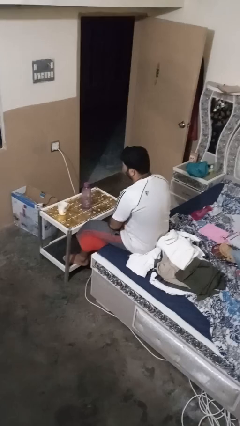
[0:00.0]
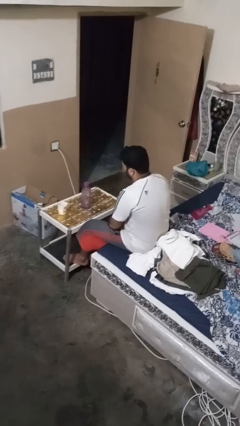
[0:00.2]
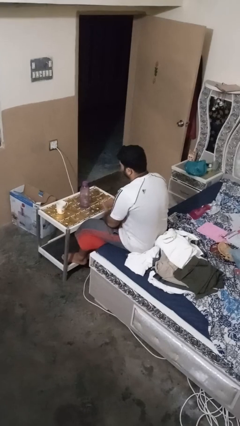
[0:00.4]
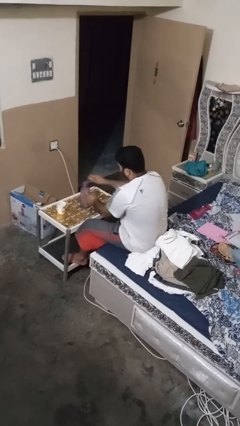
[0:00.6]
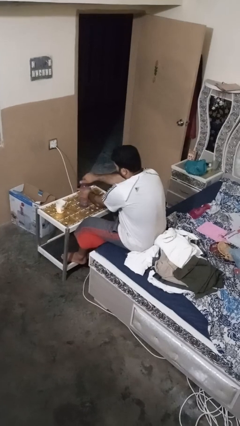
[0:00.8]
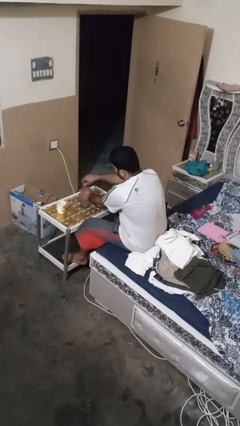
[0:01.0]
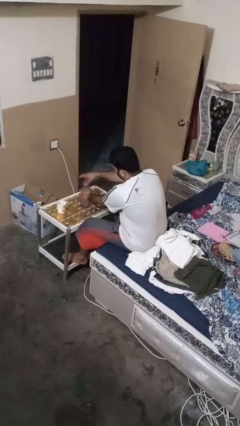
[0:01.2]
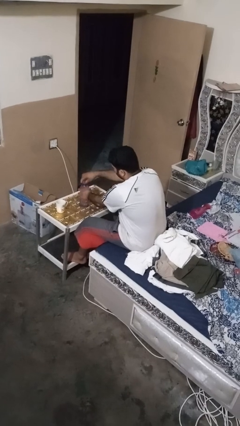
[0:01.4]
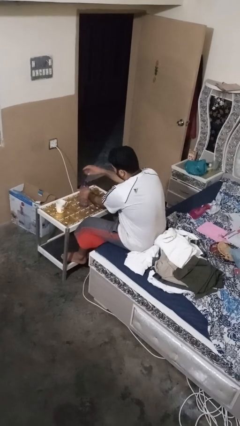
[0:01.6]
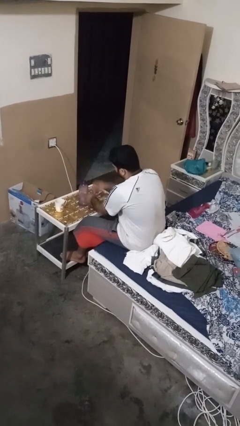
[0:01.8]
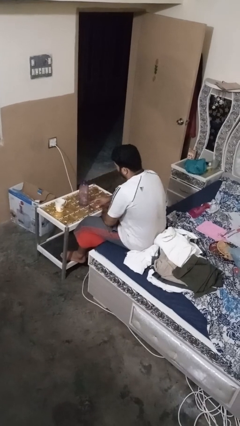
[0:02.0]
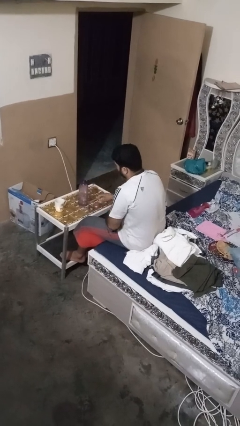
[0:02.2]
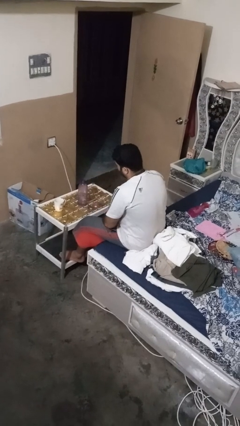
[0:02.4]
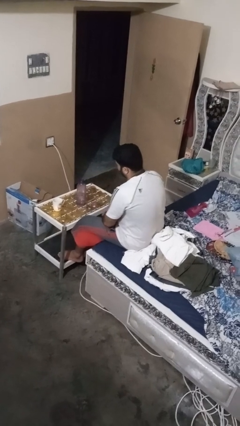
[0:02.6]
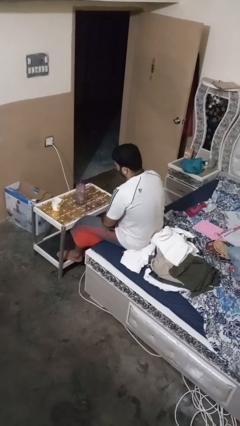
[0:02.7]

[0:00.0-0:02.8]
person unscrews lid from bottle

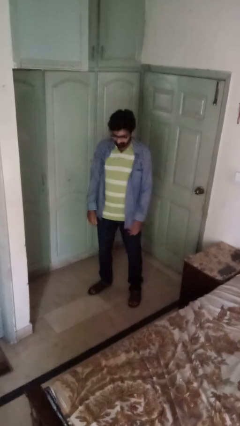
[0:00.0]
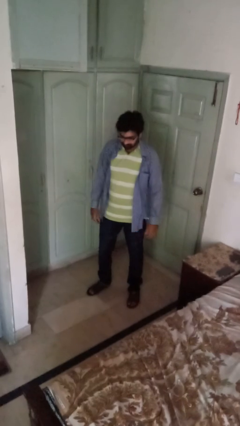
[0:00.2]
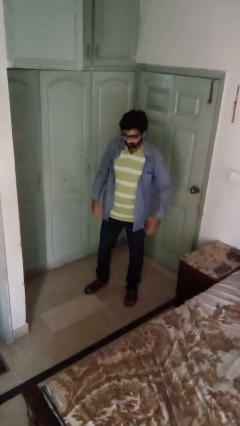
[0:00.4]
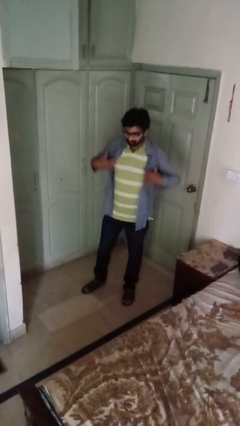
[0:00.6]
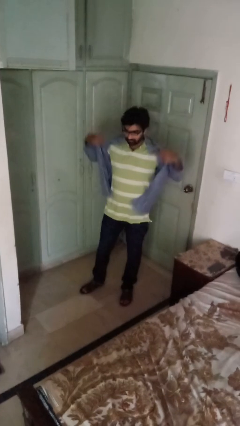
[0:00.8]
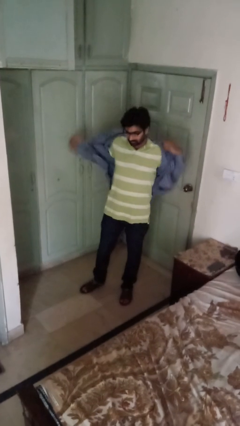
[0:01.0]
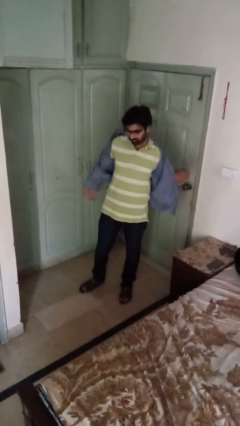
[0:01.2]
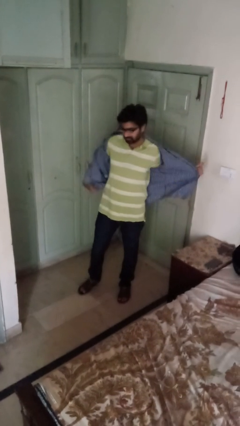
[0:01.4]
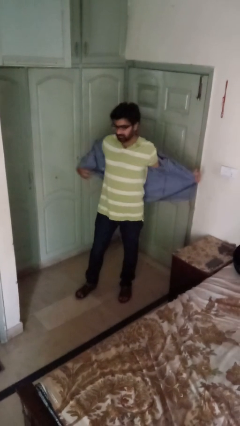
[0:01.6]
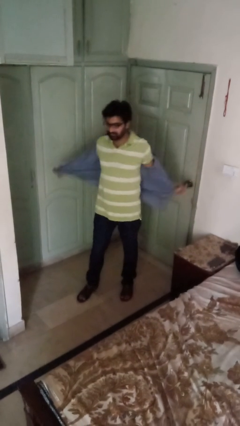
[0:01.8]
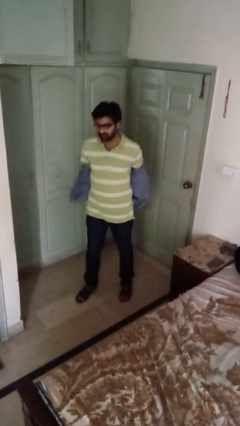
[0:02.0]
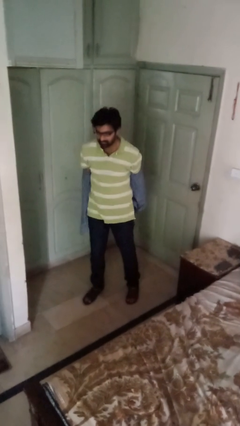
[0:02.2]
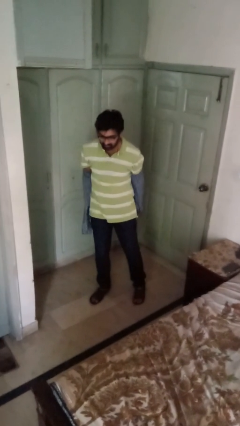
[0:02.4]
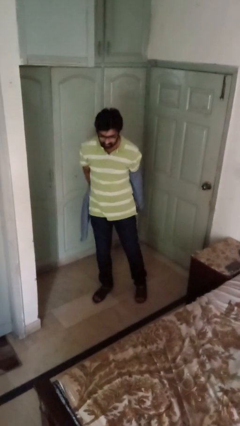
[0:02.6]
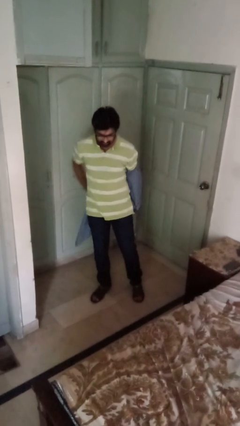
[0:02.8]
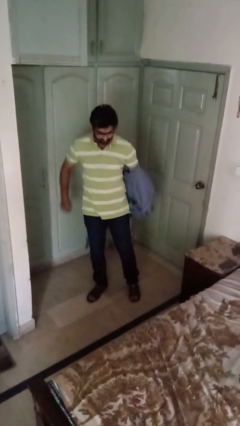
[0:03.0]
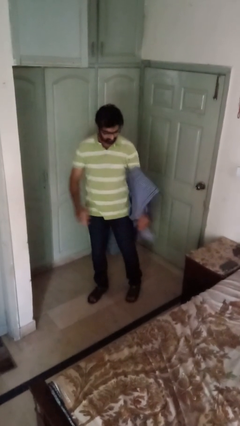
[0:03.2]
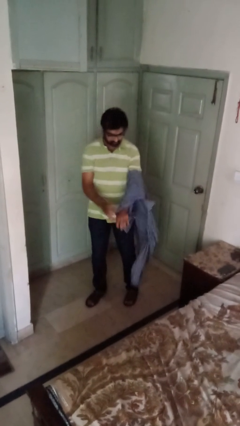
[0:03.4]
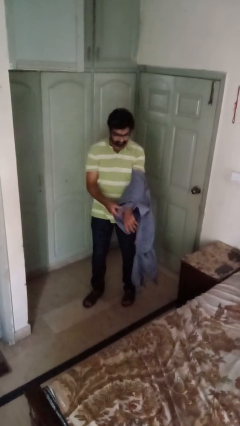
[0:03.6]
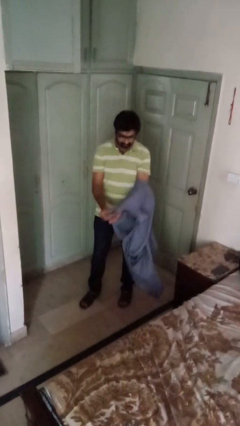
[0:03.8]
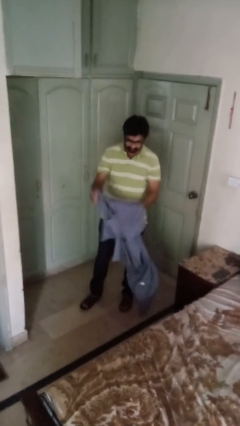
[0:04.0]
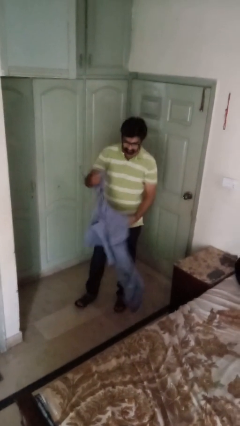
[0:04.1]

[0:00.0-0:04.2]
person takes off shirt

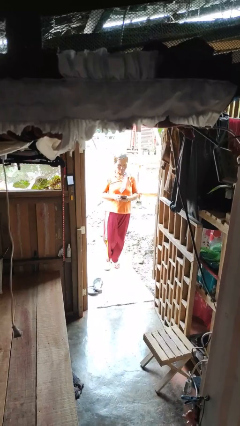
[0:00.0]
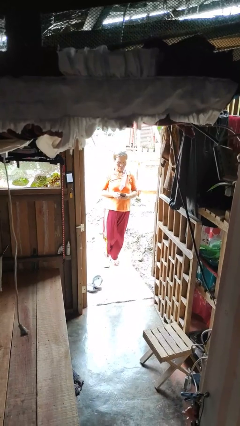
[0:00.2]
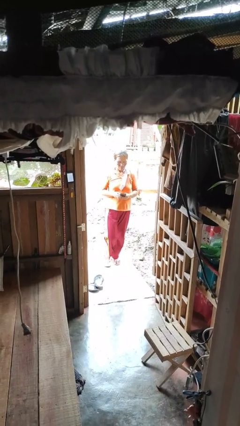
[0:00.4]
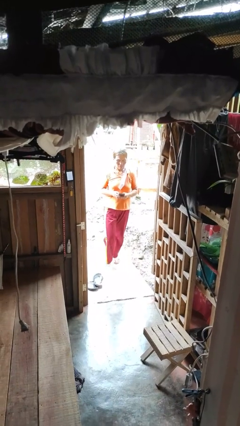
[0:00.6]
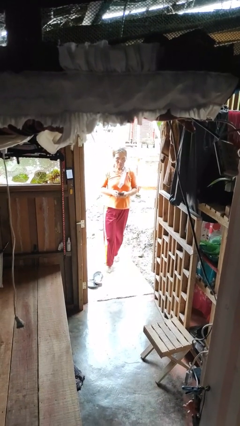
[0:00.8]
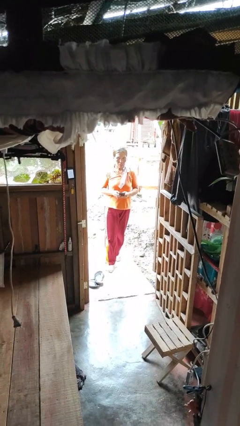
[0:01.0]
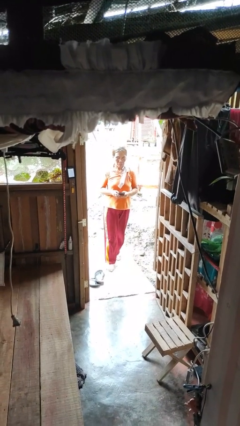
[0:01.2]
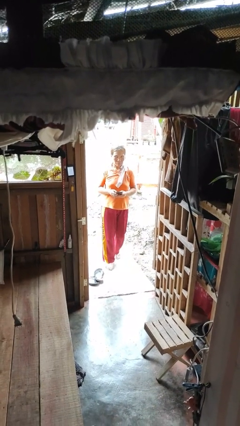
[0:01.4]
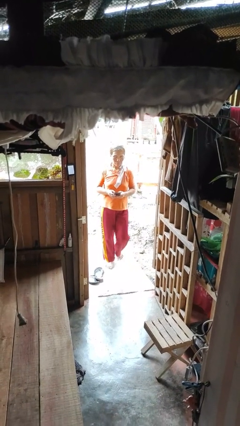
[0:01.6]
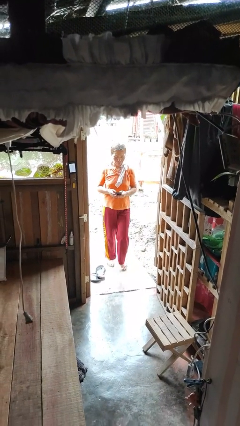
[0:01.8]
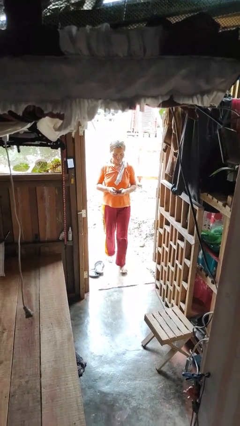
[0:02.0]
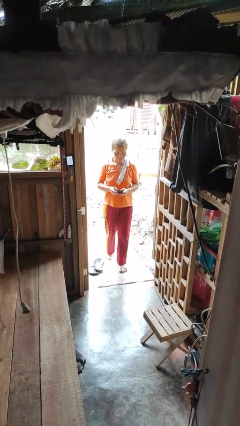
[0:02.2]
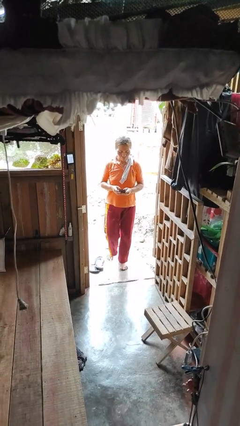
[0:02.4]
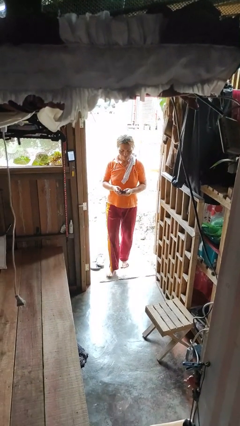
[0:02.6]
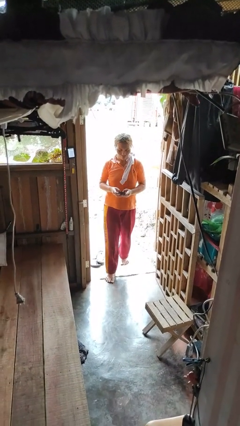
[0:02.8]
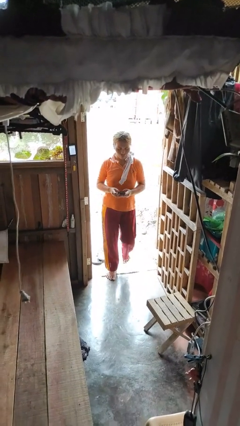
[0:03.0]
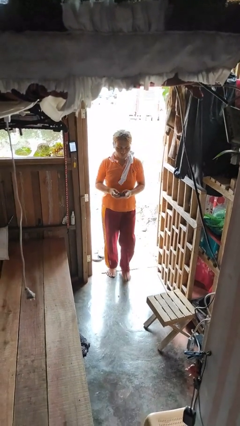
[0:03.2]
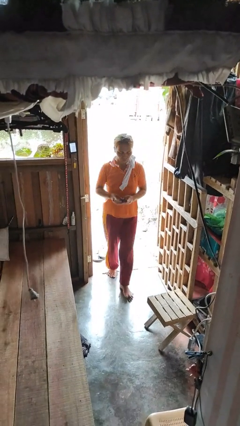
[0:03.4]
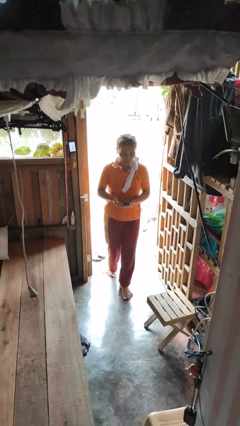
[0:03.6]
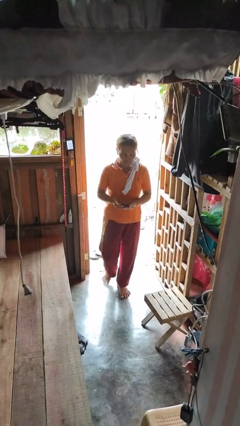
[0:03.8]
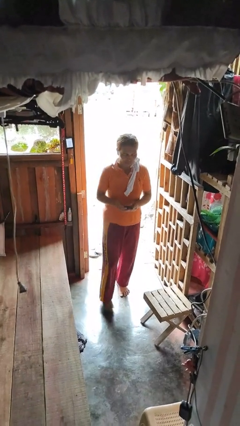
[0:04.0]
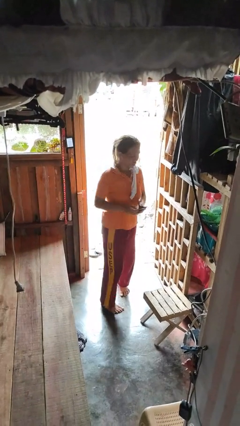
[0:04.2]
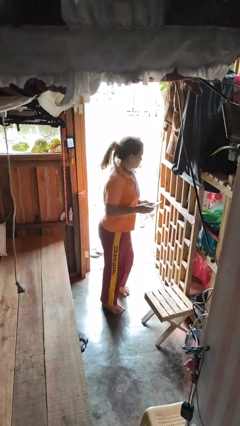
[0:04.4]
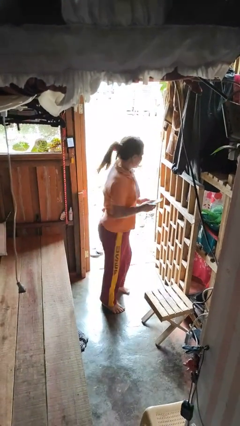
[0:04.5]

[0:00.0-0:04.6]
person enters scene through structure

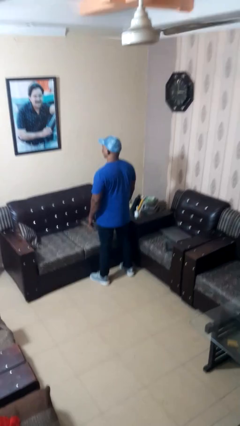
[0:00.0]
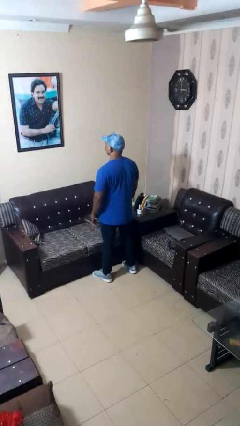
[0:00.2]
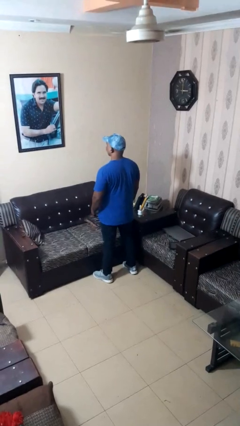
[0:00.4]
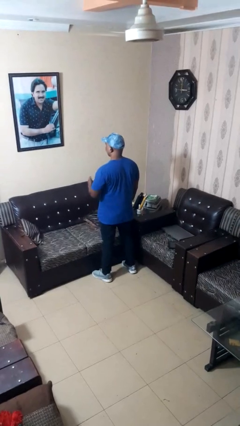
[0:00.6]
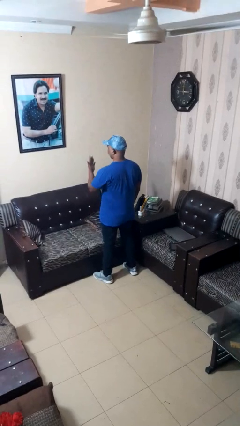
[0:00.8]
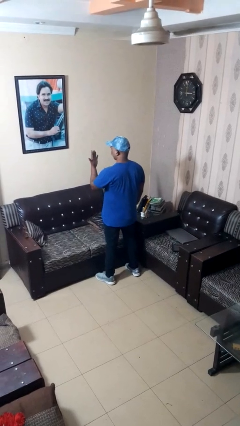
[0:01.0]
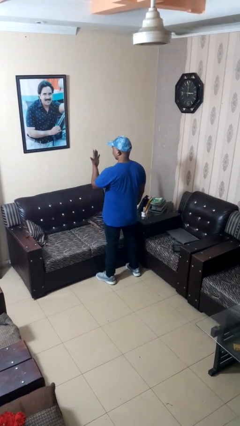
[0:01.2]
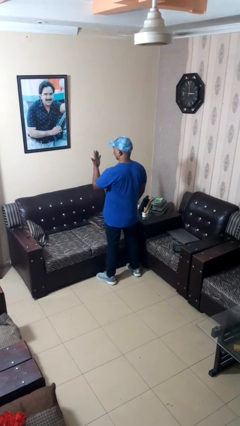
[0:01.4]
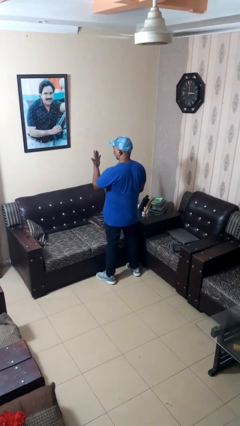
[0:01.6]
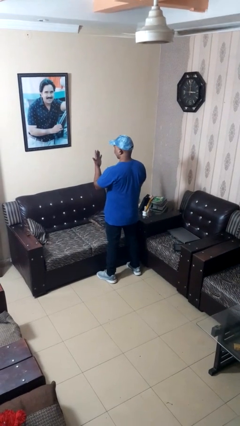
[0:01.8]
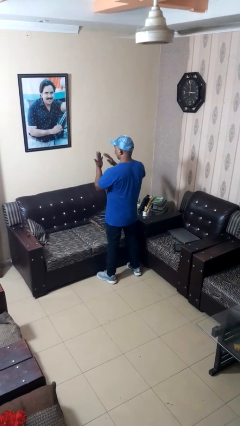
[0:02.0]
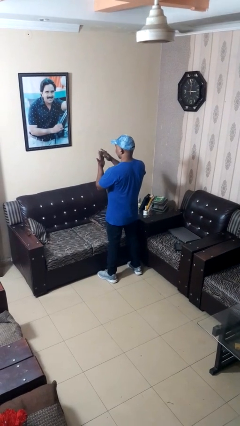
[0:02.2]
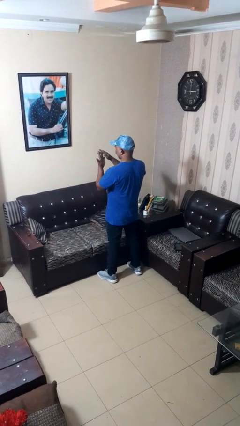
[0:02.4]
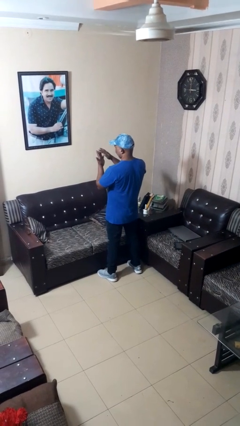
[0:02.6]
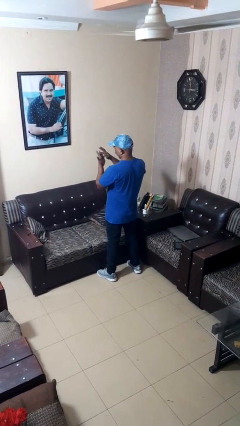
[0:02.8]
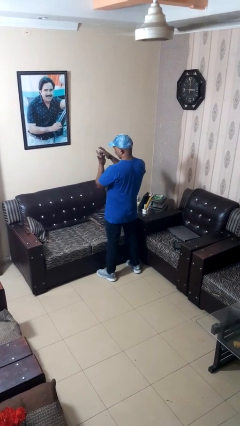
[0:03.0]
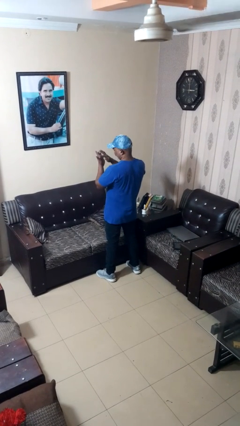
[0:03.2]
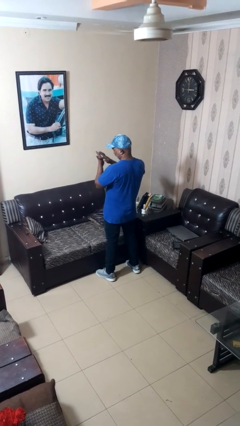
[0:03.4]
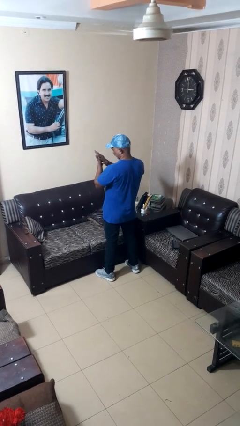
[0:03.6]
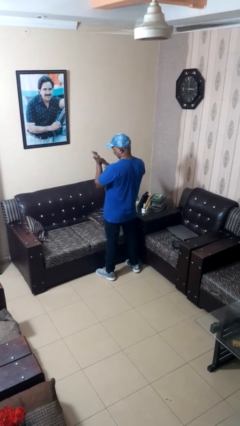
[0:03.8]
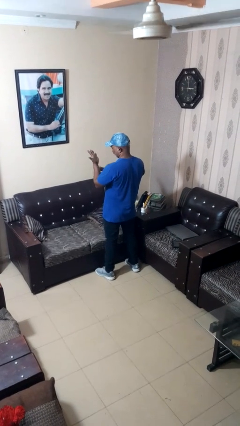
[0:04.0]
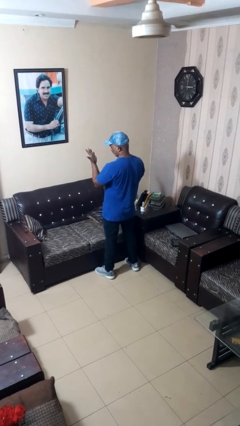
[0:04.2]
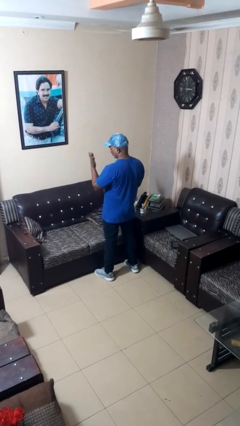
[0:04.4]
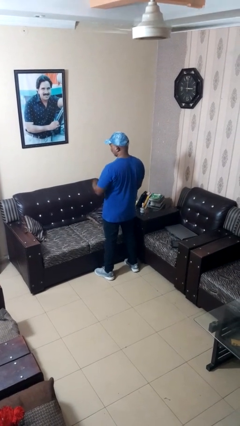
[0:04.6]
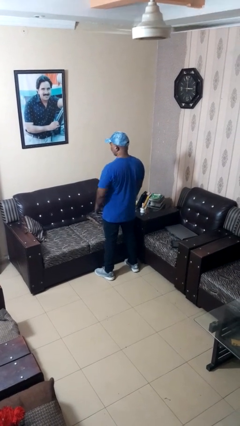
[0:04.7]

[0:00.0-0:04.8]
person looks at hands in lap

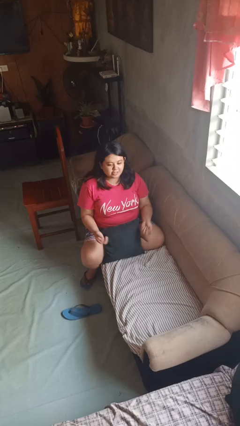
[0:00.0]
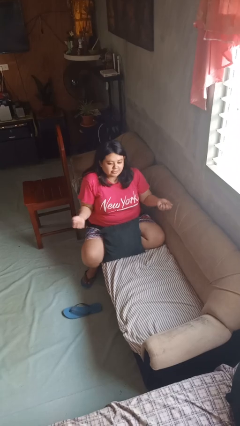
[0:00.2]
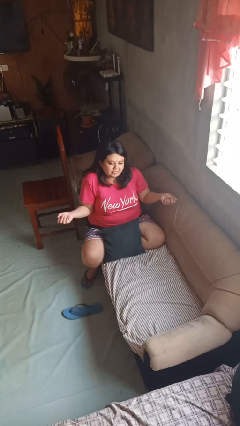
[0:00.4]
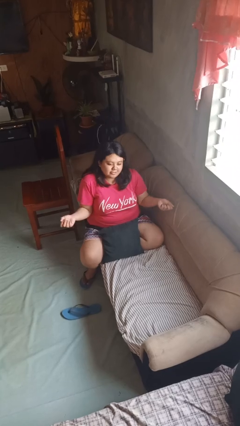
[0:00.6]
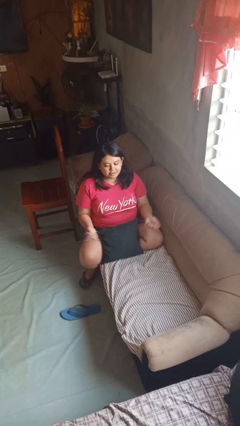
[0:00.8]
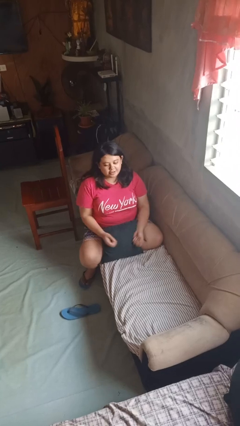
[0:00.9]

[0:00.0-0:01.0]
person shrugs

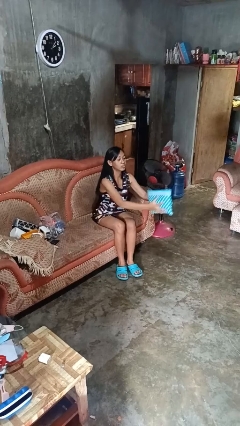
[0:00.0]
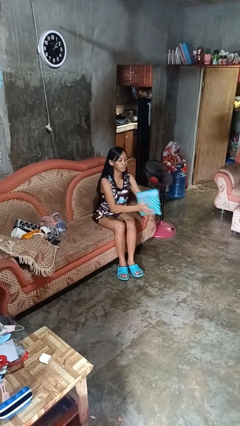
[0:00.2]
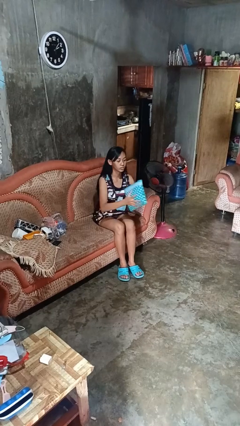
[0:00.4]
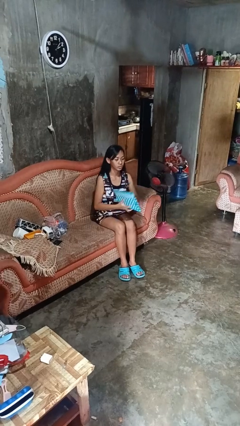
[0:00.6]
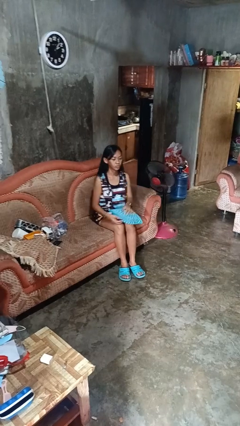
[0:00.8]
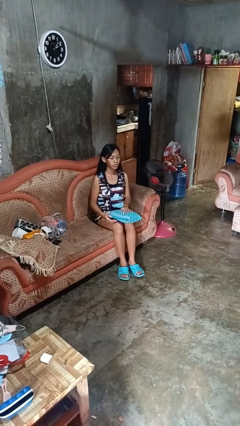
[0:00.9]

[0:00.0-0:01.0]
person catches dropped object
